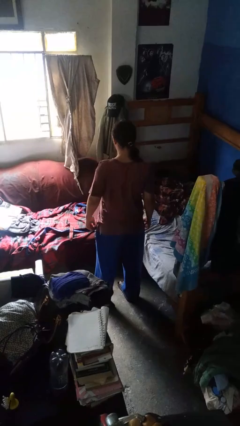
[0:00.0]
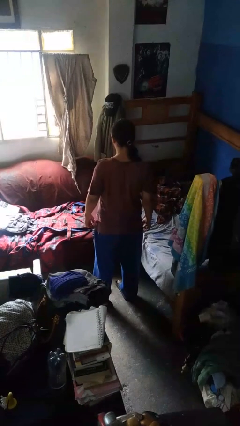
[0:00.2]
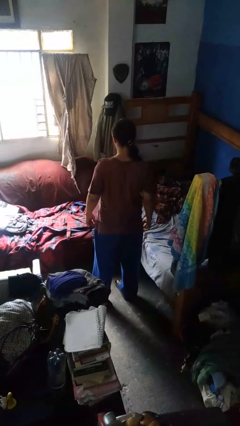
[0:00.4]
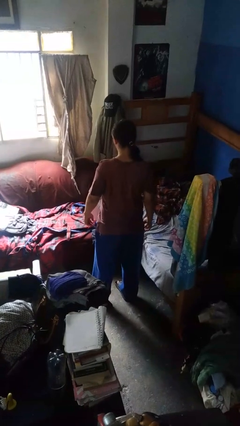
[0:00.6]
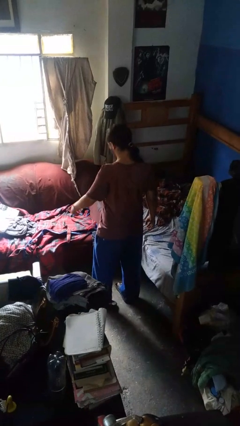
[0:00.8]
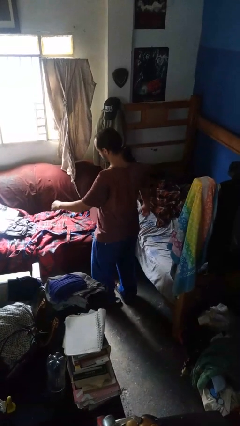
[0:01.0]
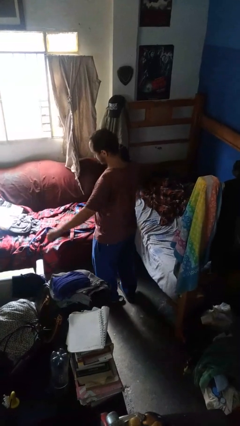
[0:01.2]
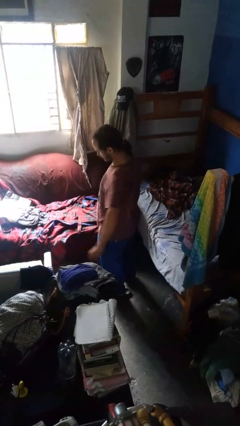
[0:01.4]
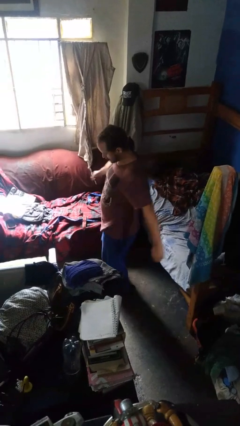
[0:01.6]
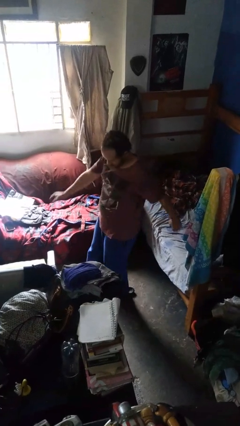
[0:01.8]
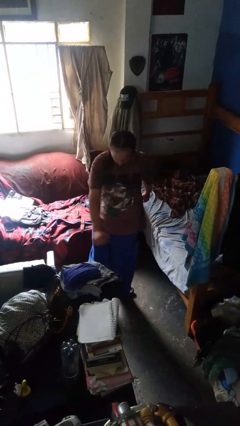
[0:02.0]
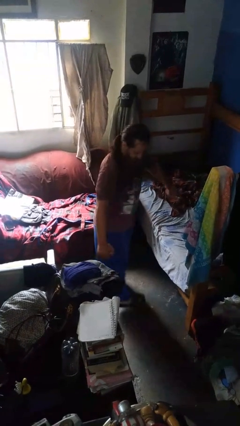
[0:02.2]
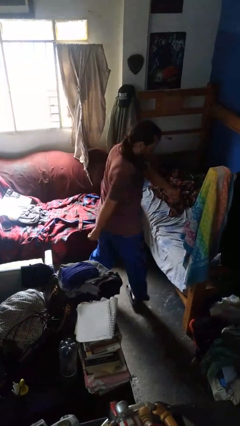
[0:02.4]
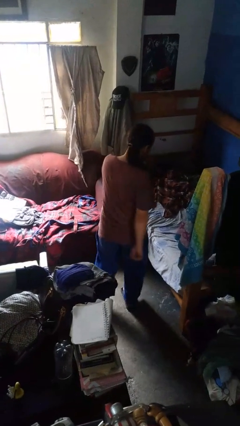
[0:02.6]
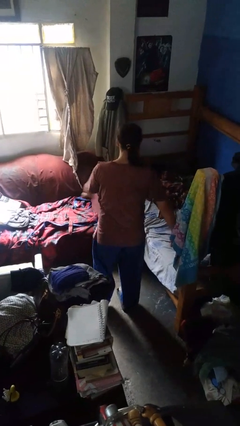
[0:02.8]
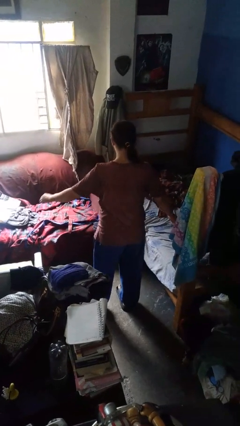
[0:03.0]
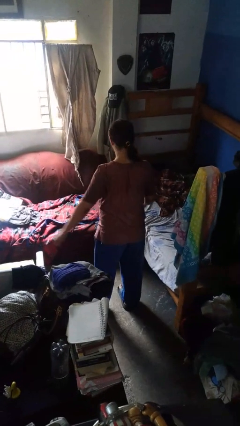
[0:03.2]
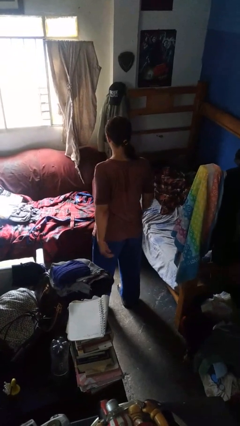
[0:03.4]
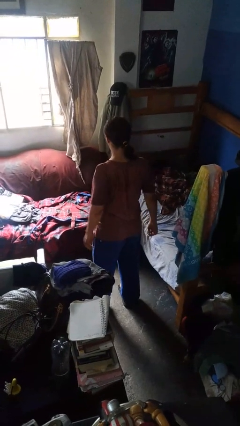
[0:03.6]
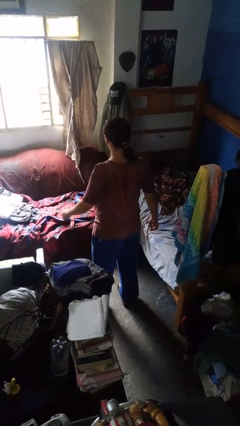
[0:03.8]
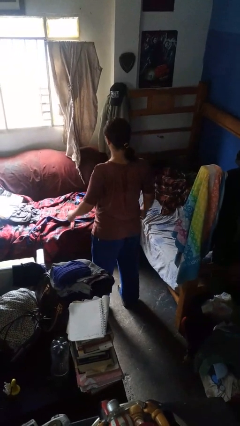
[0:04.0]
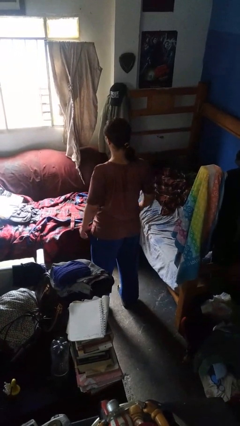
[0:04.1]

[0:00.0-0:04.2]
person twirls

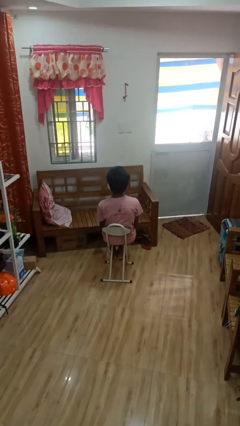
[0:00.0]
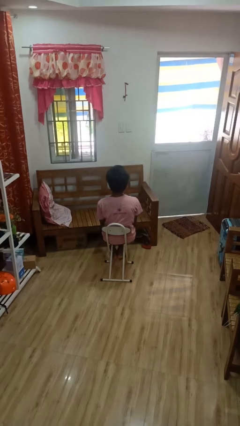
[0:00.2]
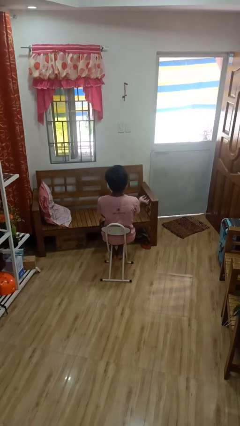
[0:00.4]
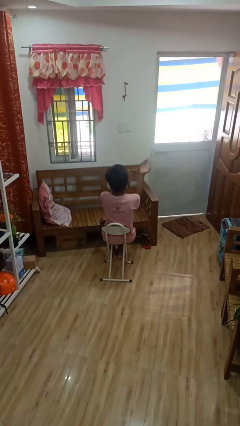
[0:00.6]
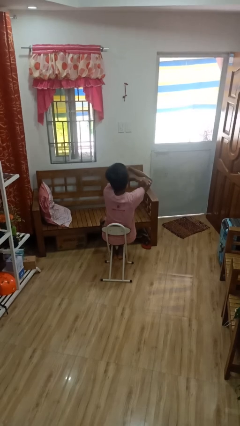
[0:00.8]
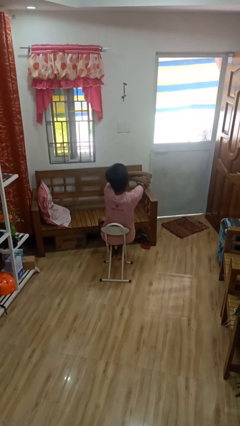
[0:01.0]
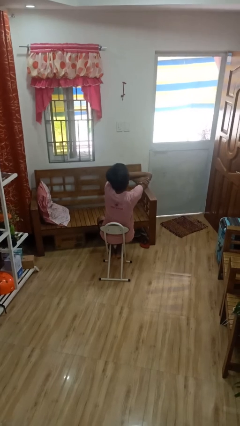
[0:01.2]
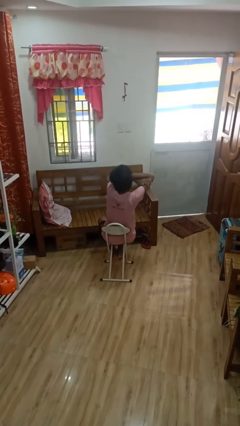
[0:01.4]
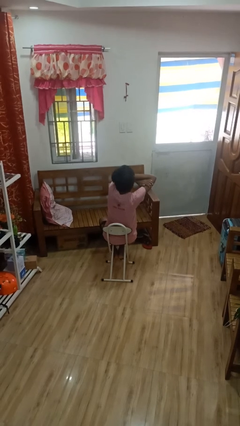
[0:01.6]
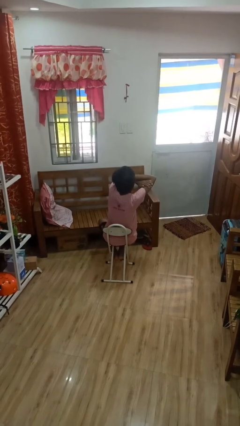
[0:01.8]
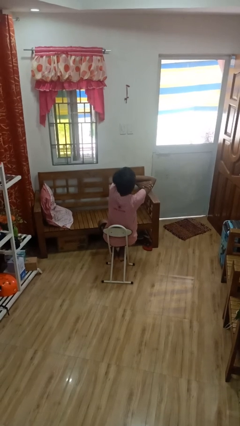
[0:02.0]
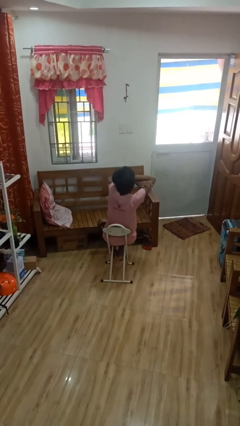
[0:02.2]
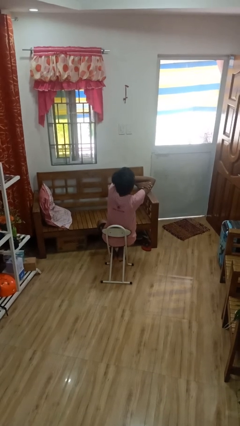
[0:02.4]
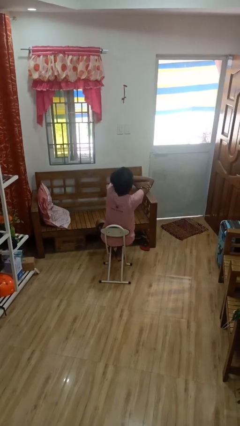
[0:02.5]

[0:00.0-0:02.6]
person gestures arms x

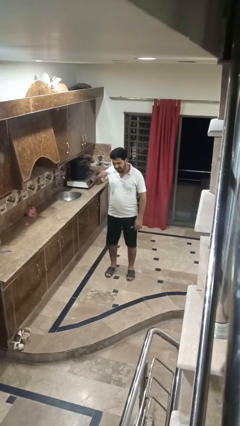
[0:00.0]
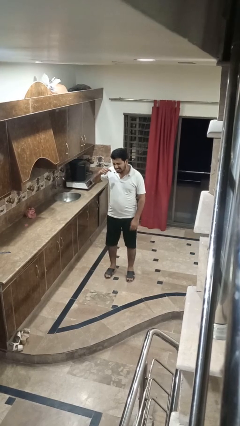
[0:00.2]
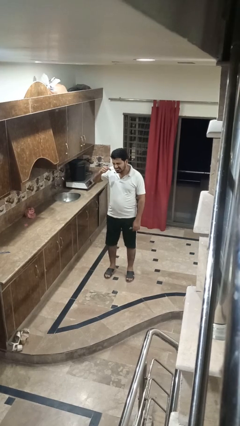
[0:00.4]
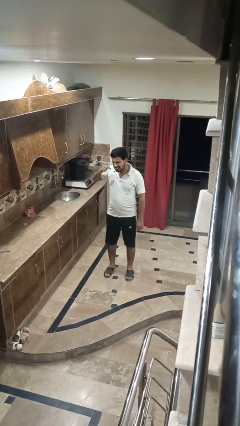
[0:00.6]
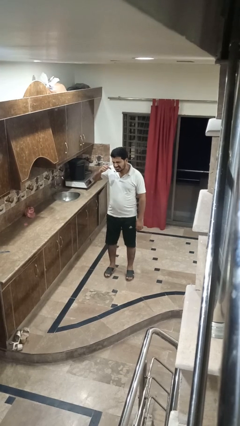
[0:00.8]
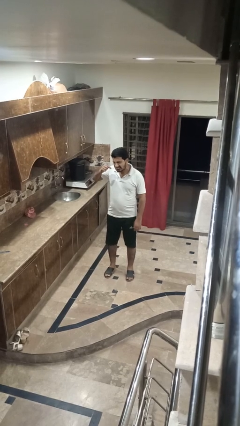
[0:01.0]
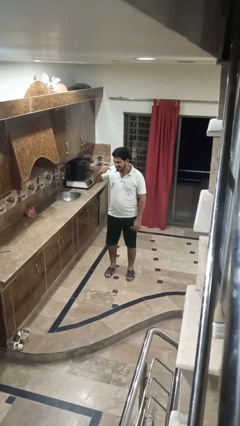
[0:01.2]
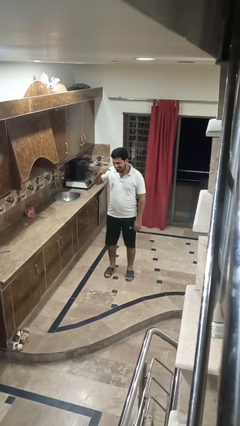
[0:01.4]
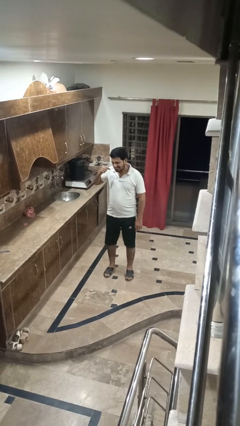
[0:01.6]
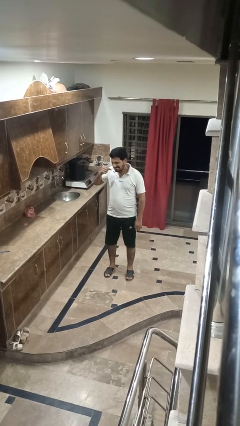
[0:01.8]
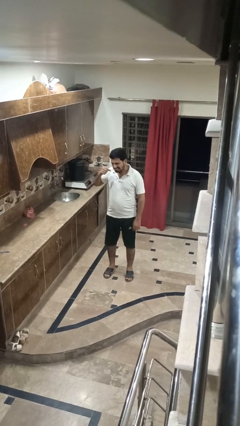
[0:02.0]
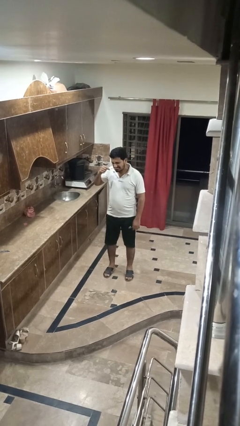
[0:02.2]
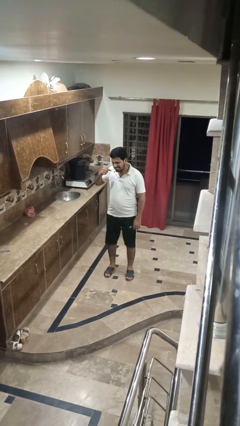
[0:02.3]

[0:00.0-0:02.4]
person brushes teeth

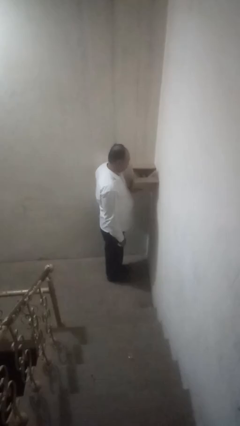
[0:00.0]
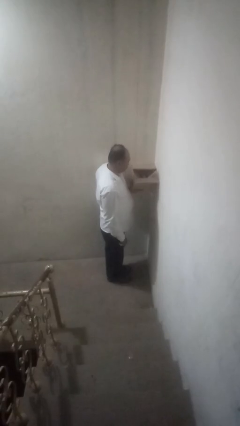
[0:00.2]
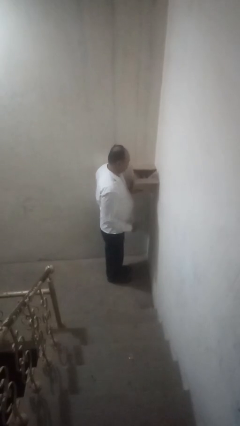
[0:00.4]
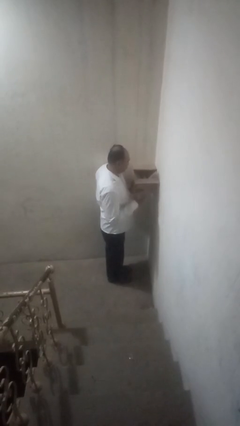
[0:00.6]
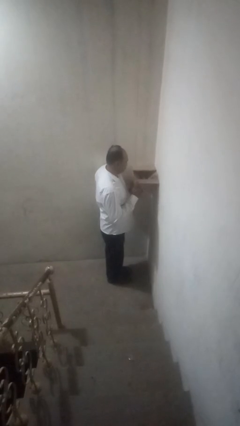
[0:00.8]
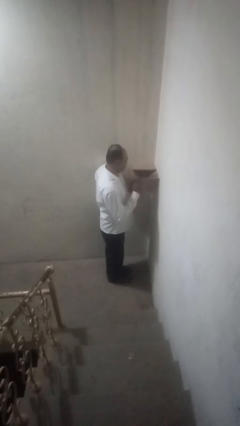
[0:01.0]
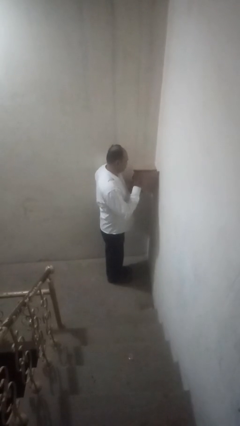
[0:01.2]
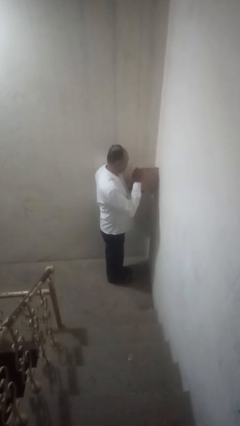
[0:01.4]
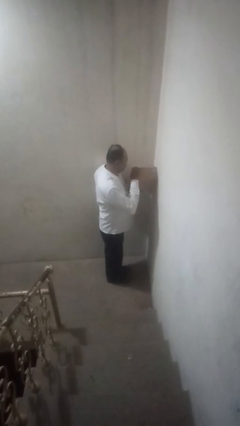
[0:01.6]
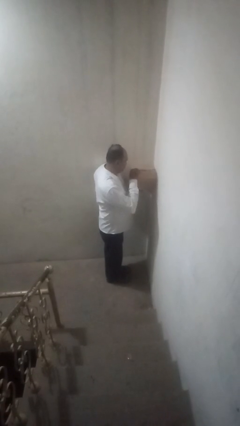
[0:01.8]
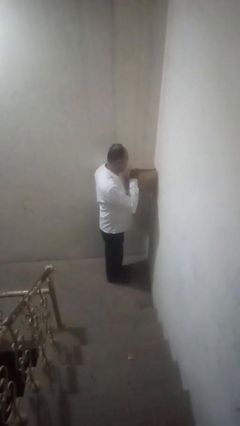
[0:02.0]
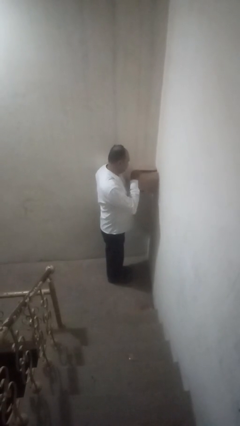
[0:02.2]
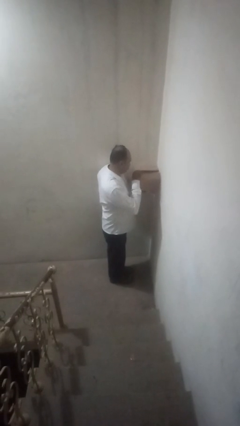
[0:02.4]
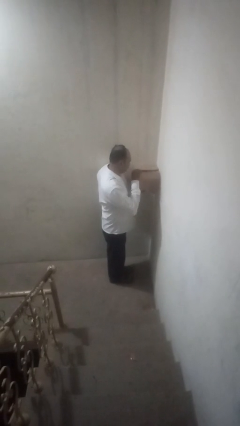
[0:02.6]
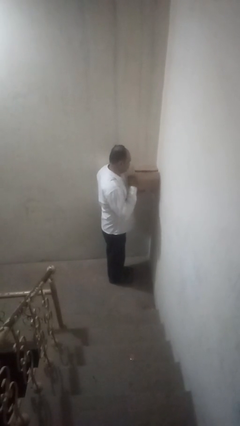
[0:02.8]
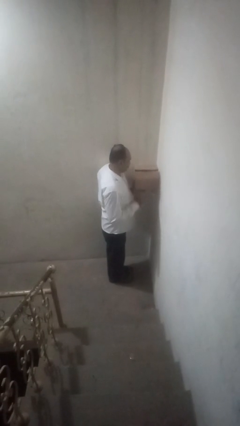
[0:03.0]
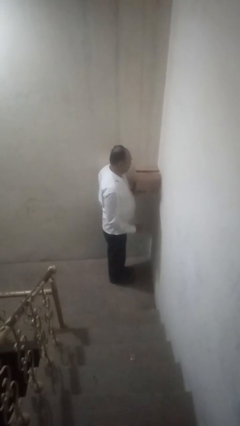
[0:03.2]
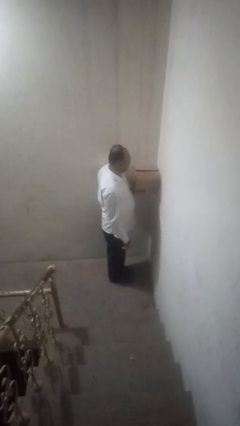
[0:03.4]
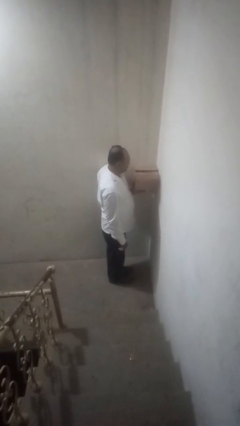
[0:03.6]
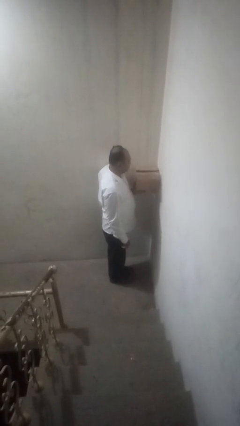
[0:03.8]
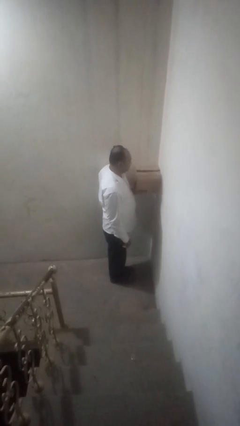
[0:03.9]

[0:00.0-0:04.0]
person closes mailbox

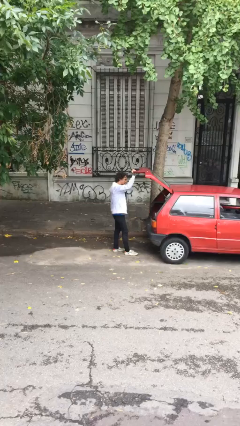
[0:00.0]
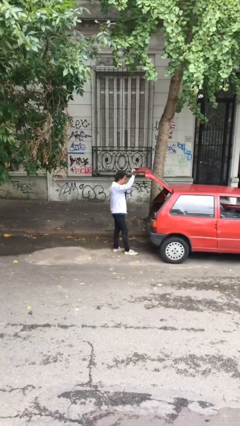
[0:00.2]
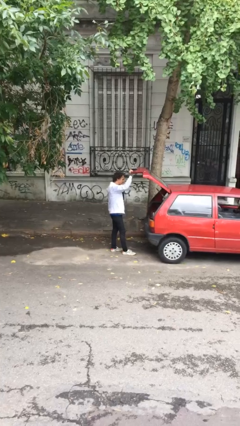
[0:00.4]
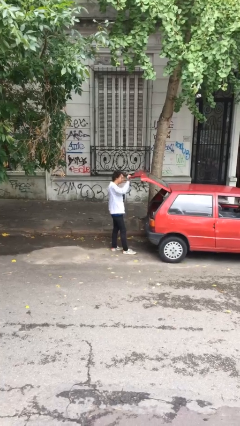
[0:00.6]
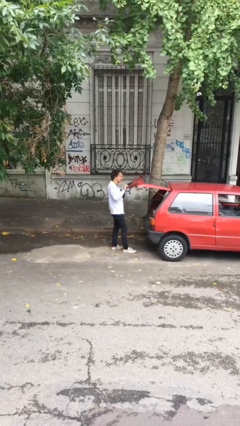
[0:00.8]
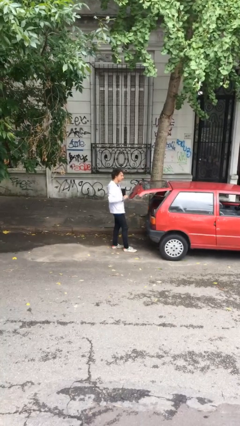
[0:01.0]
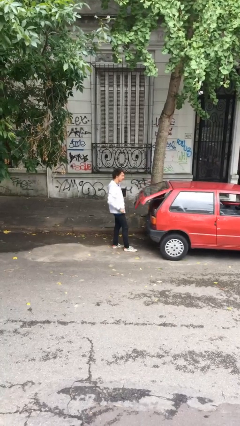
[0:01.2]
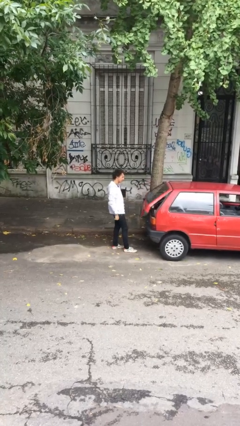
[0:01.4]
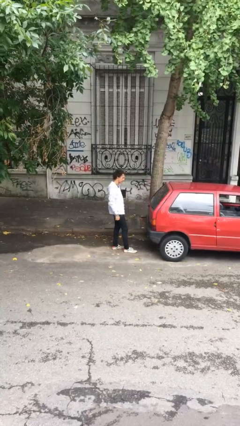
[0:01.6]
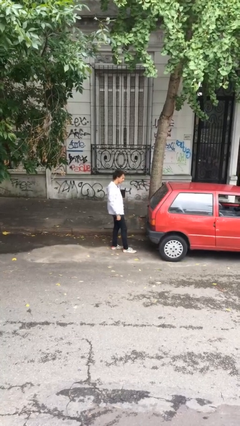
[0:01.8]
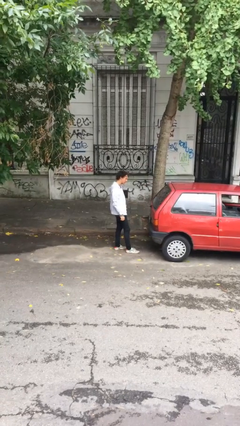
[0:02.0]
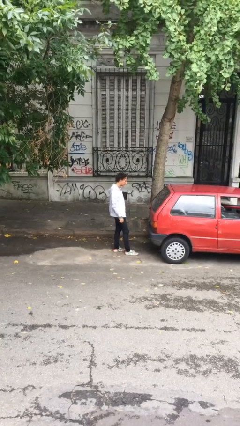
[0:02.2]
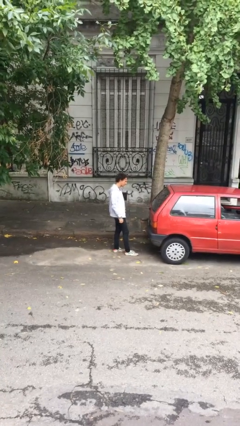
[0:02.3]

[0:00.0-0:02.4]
person closes car trunk

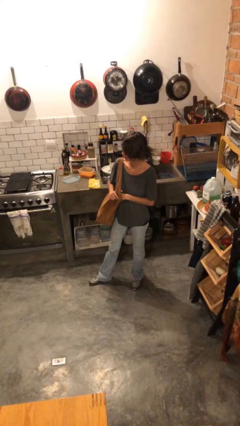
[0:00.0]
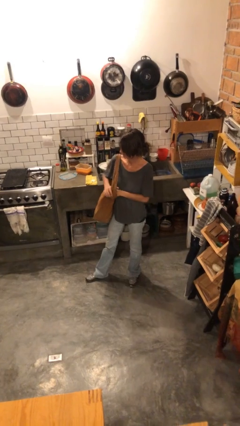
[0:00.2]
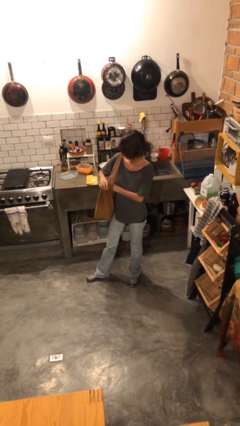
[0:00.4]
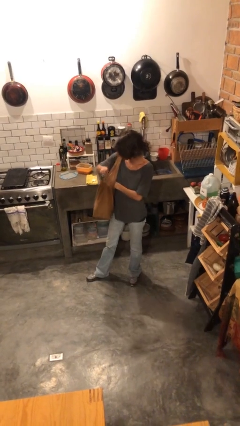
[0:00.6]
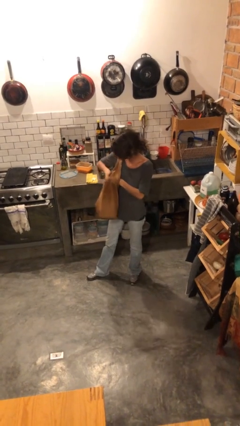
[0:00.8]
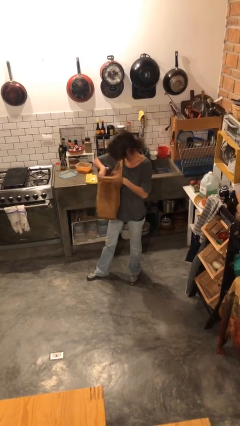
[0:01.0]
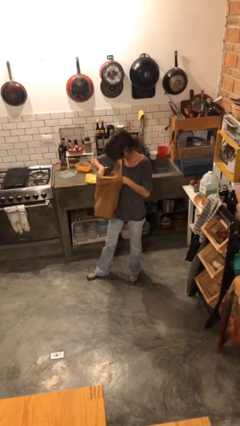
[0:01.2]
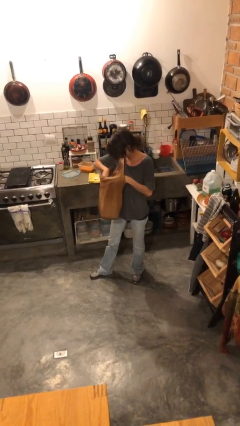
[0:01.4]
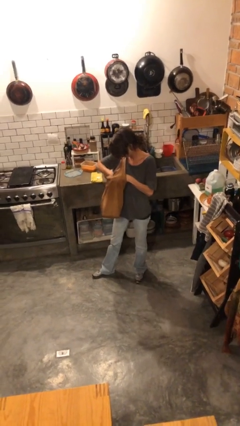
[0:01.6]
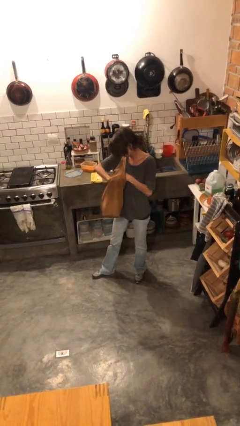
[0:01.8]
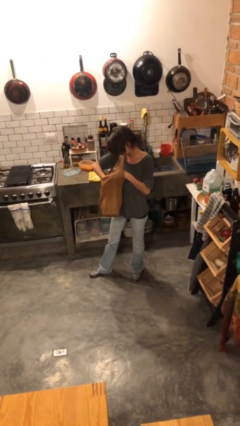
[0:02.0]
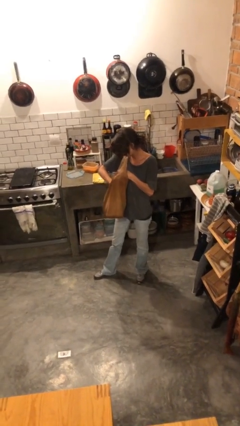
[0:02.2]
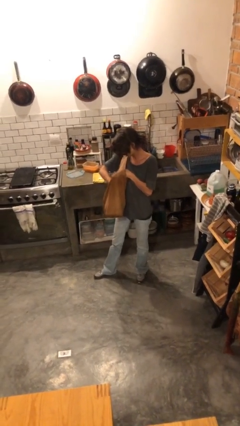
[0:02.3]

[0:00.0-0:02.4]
person searches in purse
